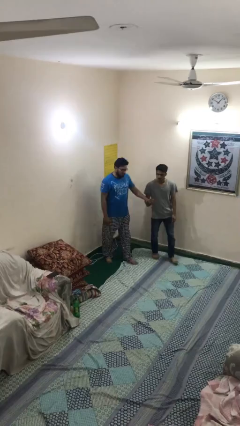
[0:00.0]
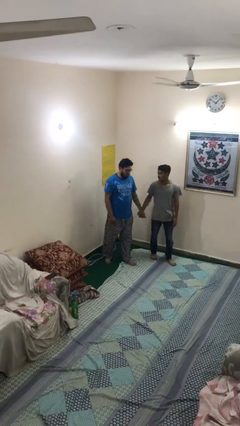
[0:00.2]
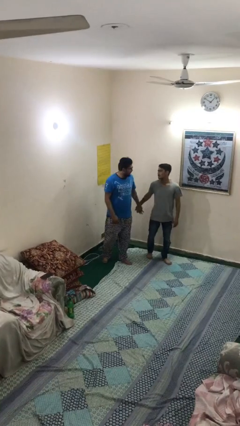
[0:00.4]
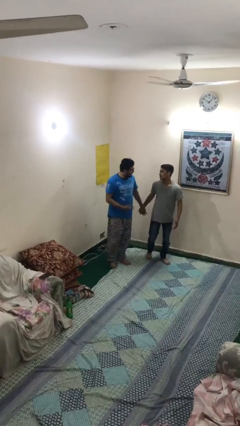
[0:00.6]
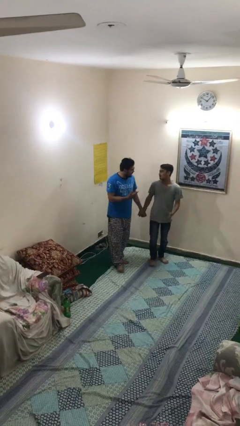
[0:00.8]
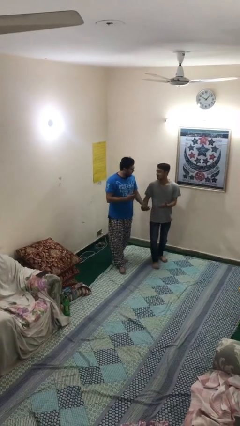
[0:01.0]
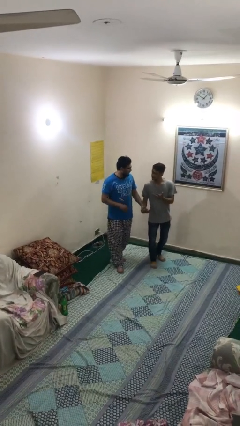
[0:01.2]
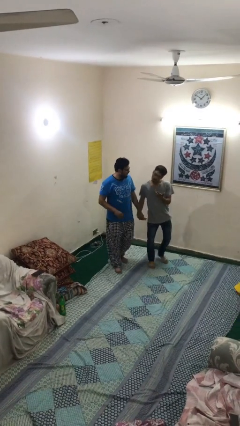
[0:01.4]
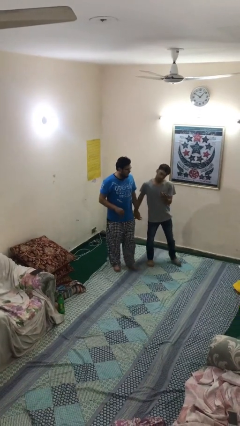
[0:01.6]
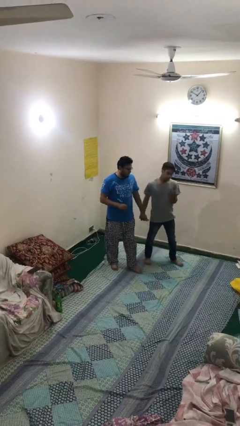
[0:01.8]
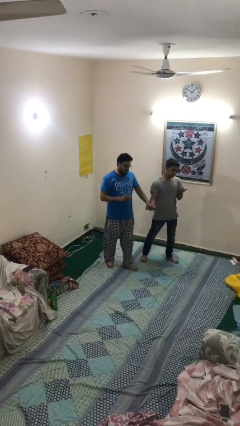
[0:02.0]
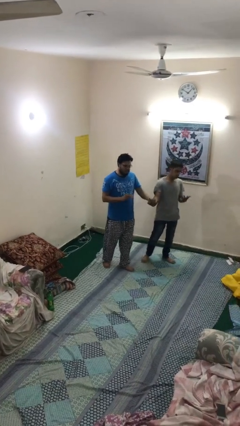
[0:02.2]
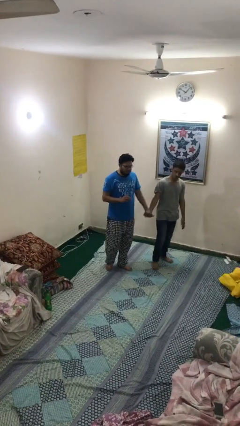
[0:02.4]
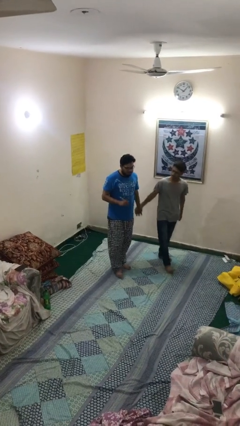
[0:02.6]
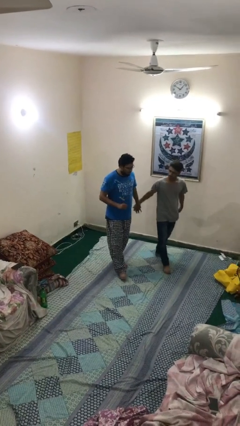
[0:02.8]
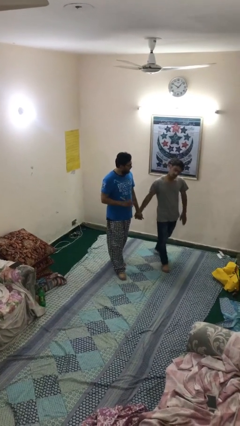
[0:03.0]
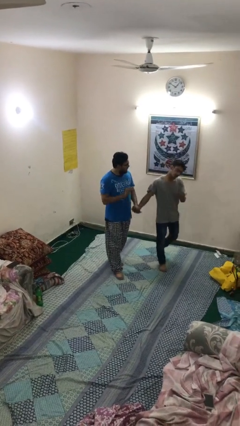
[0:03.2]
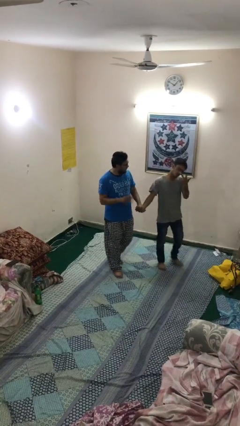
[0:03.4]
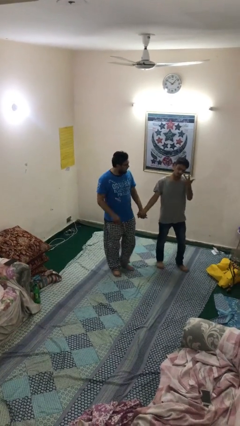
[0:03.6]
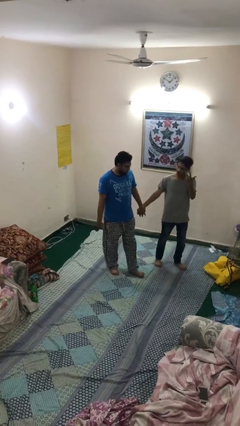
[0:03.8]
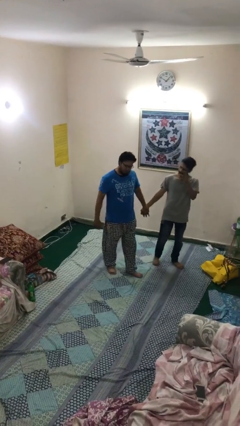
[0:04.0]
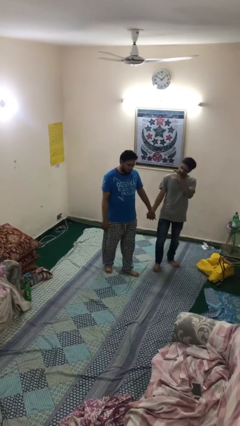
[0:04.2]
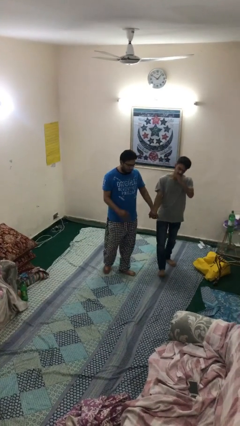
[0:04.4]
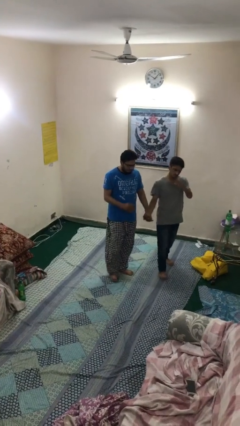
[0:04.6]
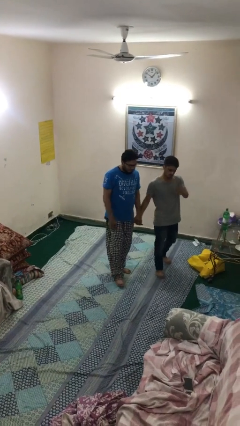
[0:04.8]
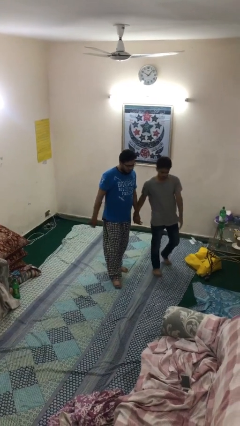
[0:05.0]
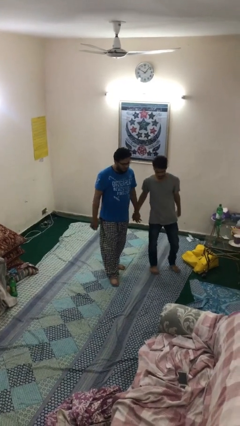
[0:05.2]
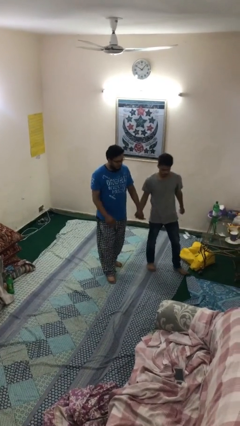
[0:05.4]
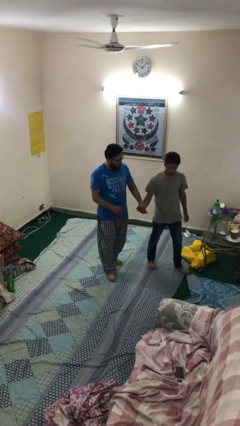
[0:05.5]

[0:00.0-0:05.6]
person holds hand

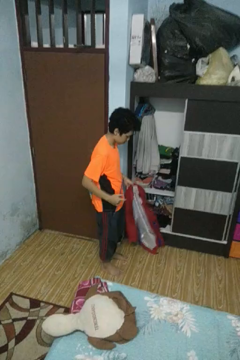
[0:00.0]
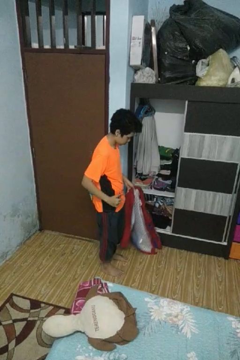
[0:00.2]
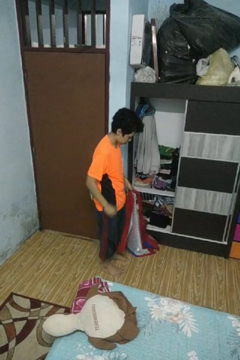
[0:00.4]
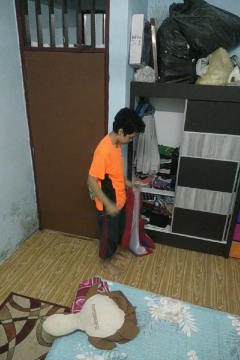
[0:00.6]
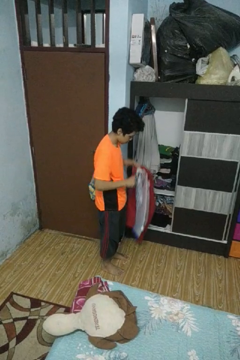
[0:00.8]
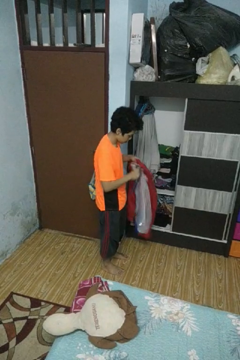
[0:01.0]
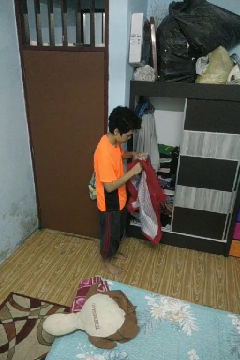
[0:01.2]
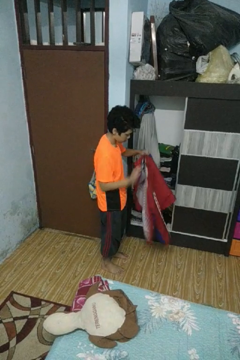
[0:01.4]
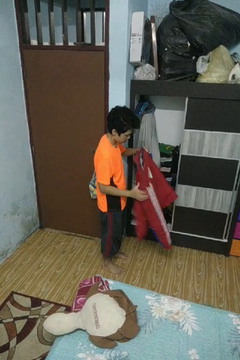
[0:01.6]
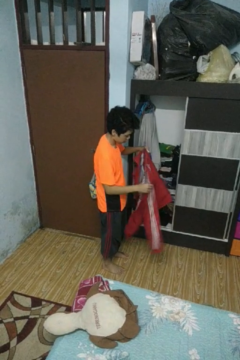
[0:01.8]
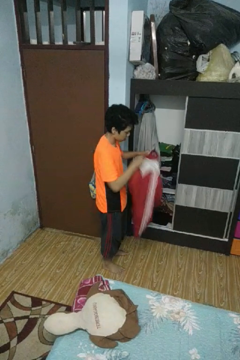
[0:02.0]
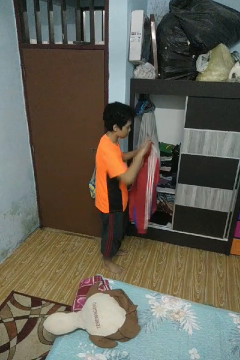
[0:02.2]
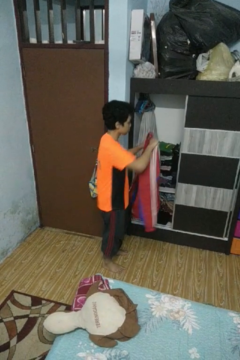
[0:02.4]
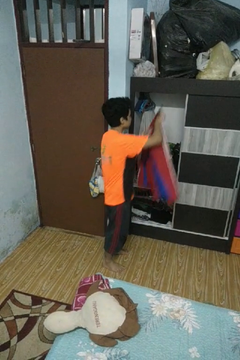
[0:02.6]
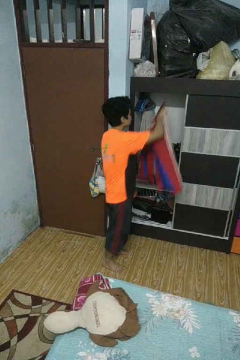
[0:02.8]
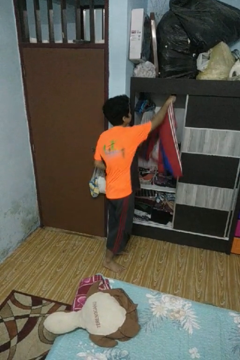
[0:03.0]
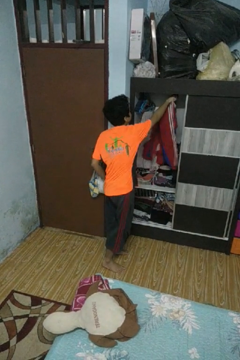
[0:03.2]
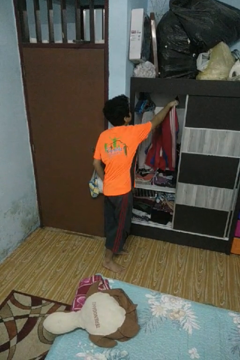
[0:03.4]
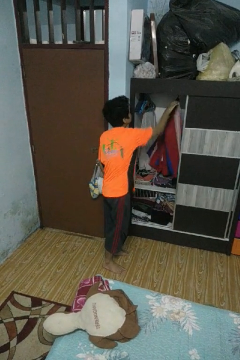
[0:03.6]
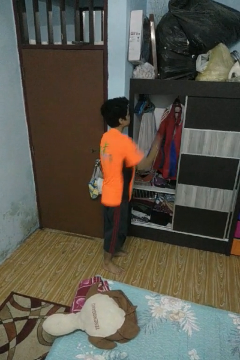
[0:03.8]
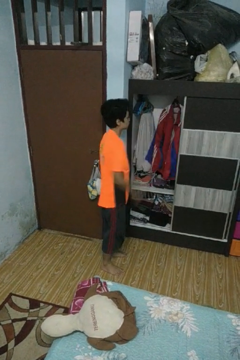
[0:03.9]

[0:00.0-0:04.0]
person puts clothes into closet

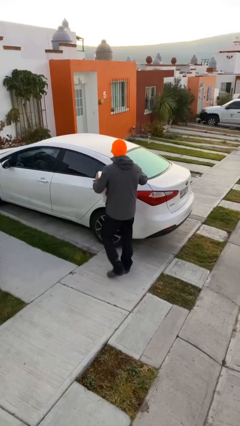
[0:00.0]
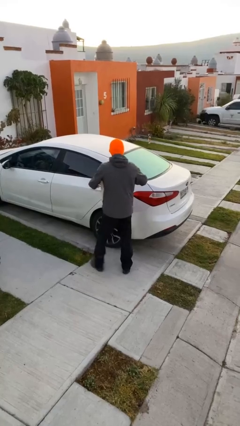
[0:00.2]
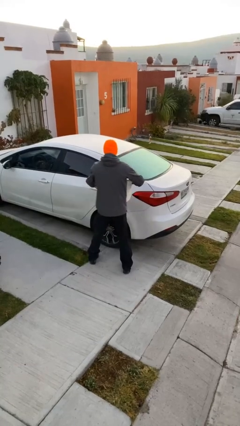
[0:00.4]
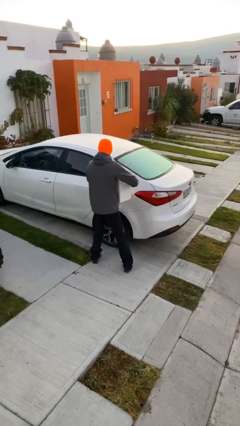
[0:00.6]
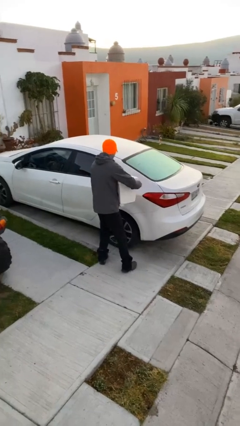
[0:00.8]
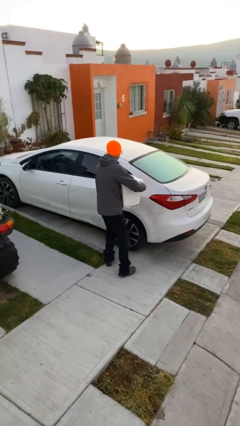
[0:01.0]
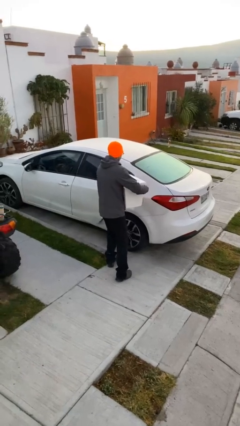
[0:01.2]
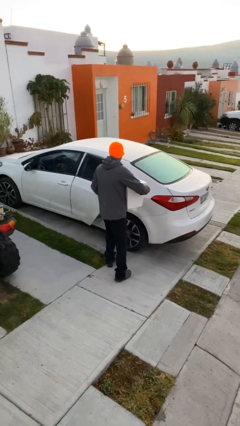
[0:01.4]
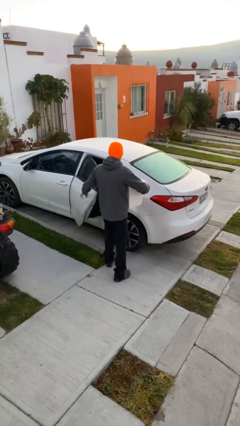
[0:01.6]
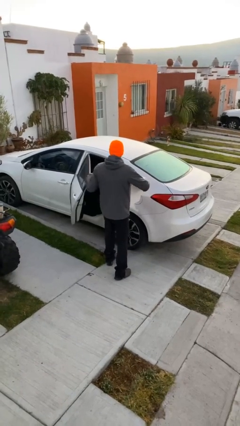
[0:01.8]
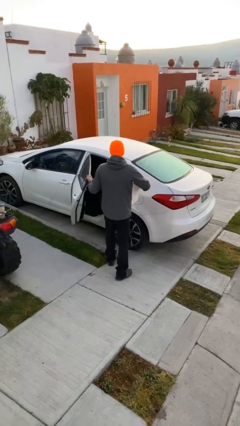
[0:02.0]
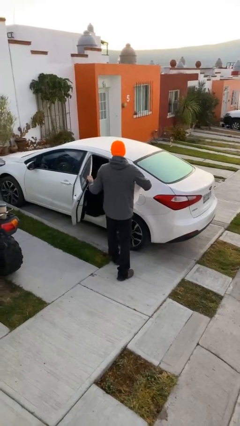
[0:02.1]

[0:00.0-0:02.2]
person opens car door

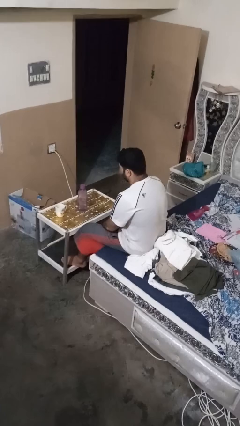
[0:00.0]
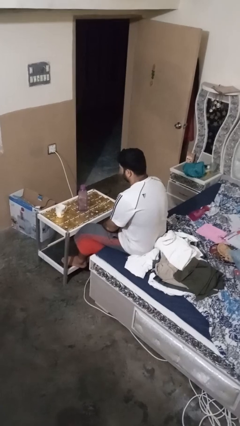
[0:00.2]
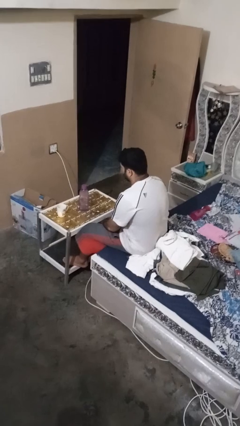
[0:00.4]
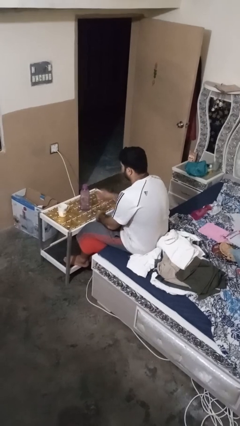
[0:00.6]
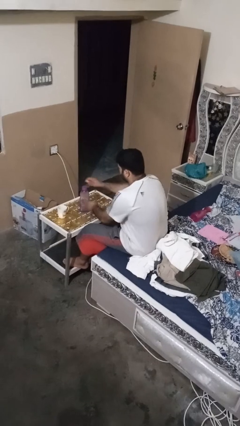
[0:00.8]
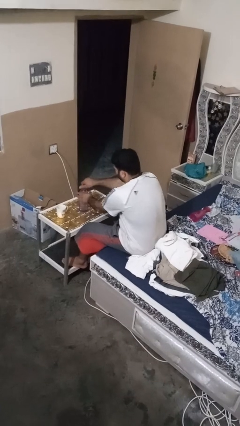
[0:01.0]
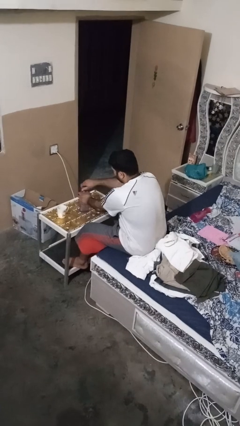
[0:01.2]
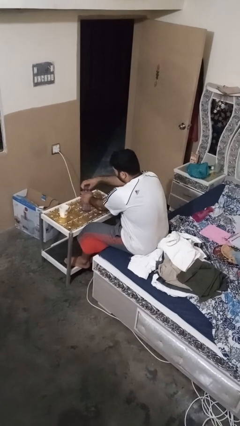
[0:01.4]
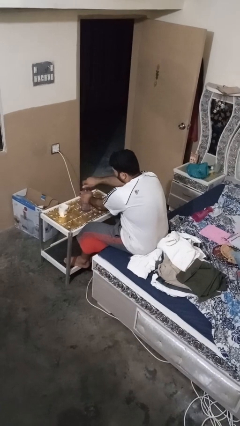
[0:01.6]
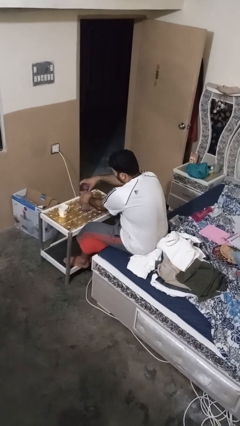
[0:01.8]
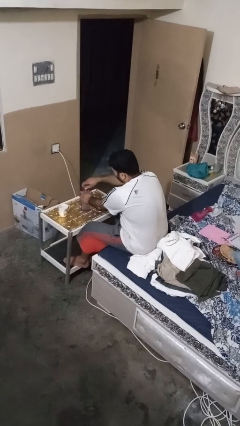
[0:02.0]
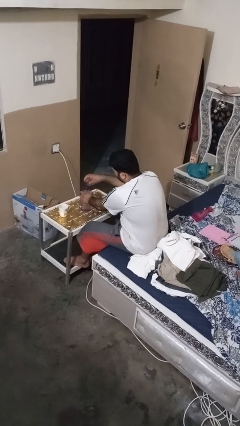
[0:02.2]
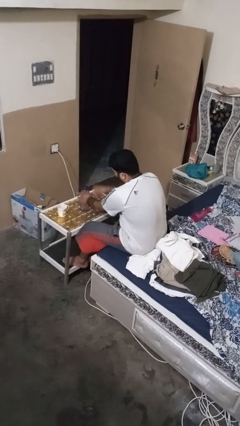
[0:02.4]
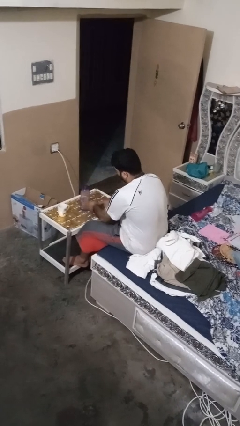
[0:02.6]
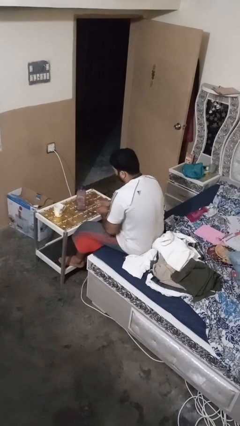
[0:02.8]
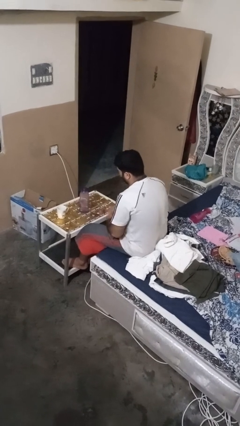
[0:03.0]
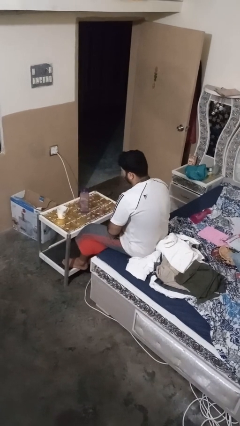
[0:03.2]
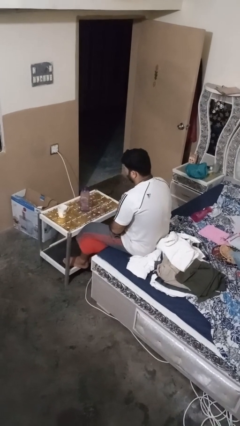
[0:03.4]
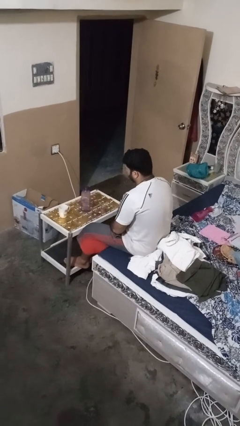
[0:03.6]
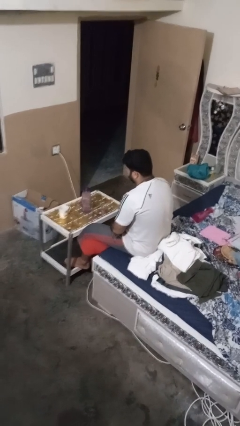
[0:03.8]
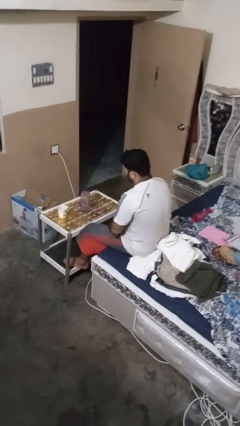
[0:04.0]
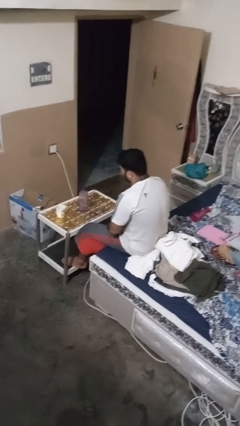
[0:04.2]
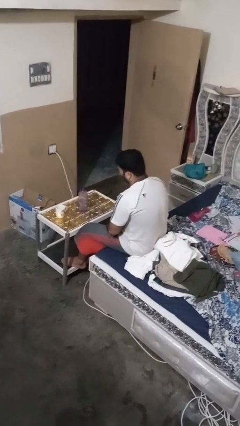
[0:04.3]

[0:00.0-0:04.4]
person unscrews lid from bottle

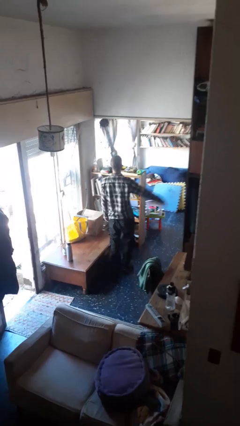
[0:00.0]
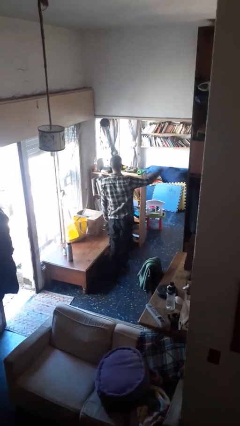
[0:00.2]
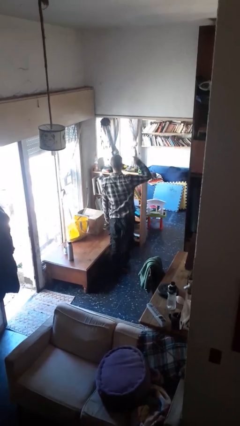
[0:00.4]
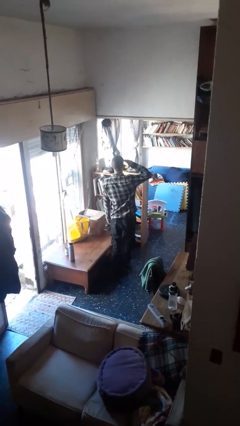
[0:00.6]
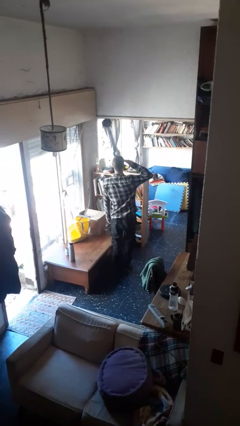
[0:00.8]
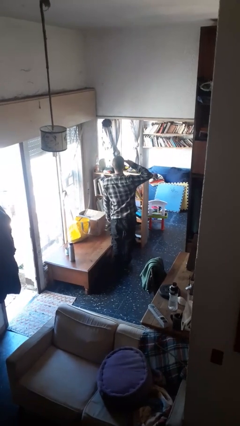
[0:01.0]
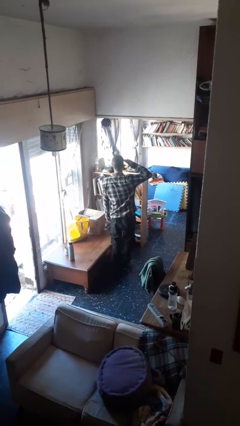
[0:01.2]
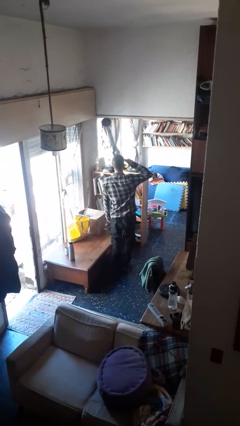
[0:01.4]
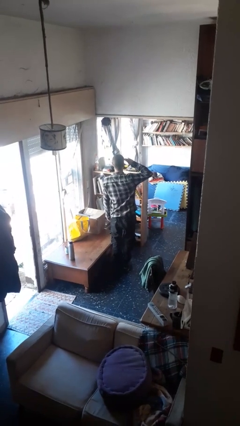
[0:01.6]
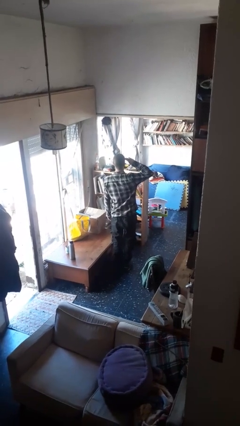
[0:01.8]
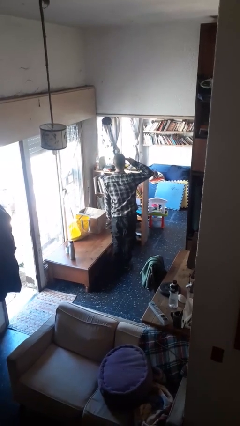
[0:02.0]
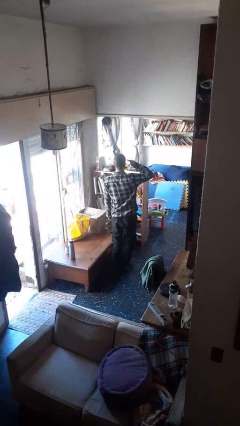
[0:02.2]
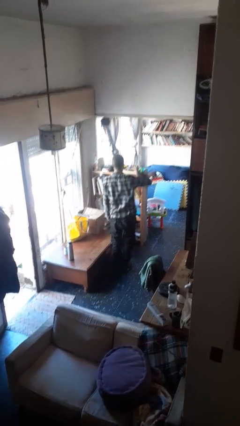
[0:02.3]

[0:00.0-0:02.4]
person salutes
